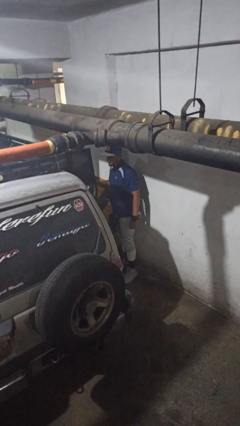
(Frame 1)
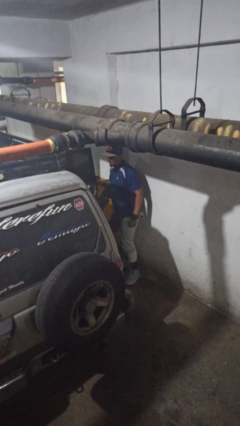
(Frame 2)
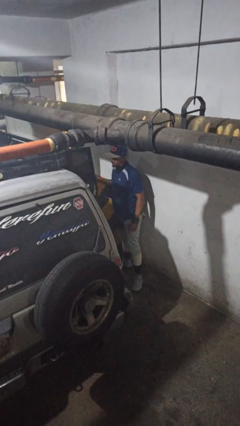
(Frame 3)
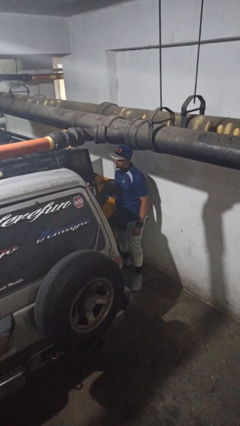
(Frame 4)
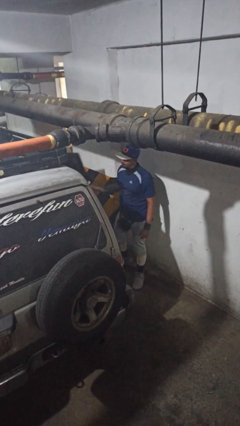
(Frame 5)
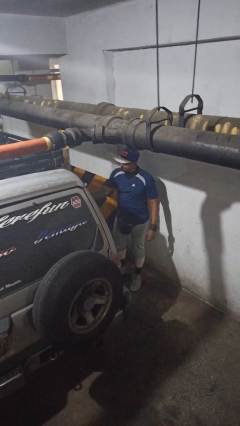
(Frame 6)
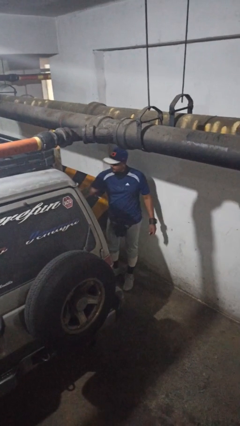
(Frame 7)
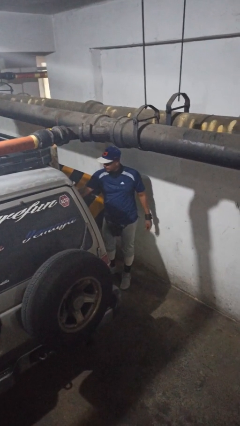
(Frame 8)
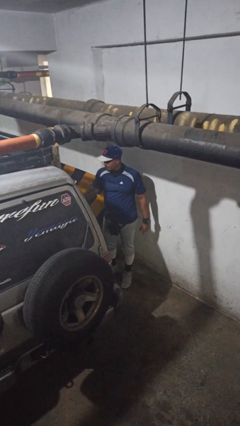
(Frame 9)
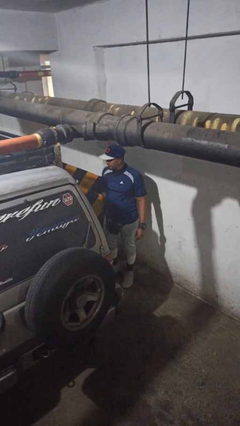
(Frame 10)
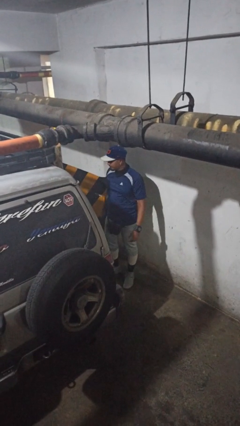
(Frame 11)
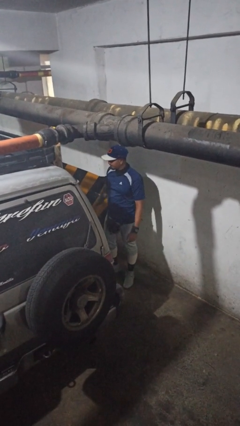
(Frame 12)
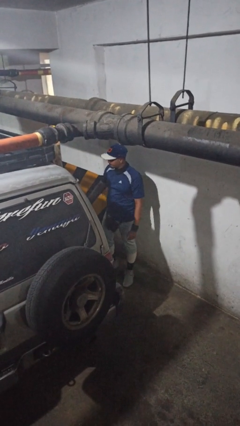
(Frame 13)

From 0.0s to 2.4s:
person closes car door

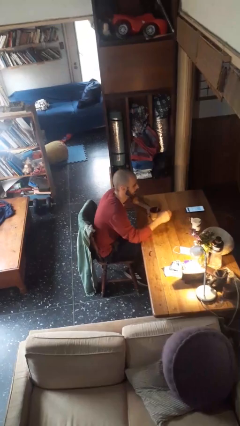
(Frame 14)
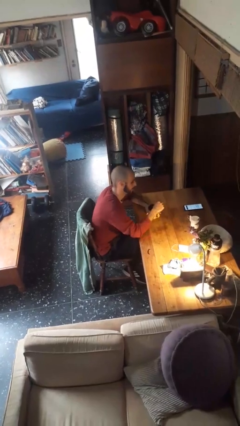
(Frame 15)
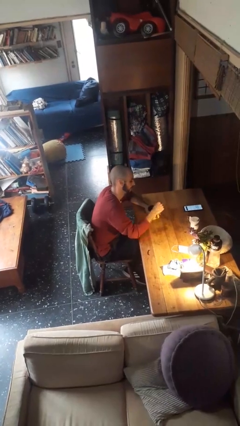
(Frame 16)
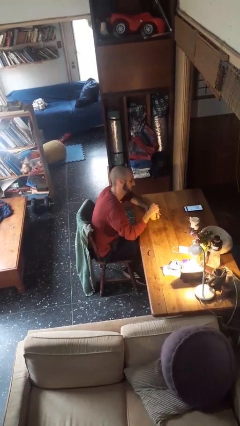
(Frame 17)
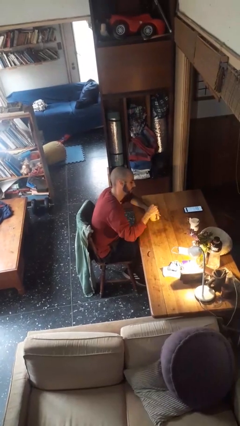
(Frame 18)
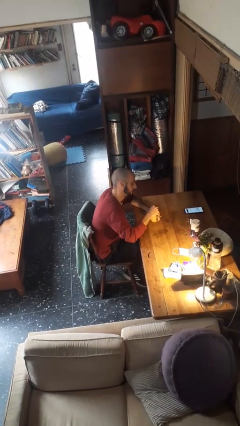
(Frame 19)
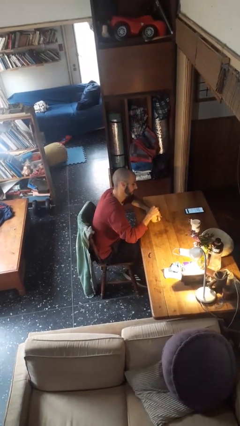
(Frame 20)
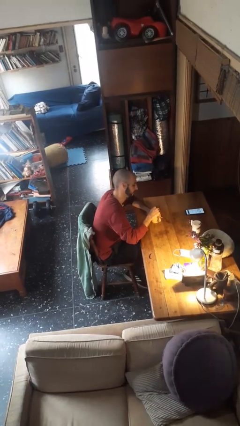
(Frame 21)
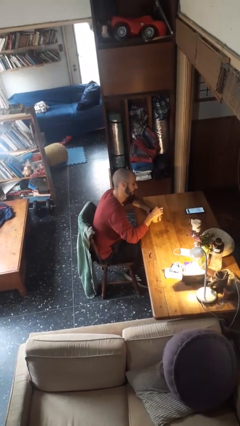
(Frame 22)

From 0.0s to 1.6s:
person stirs mug

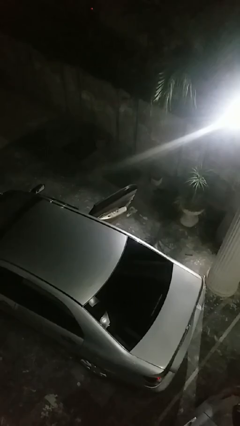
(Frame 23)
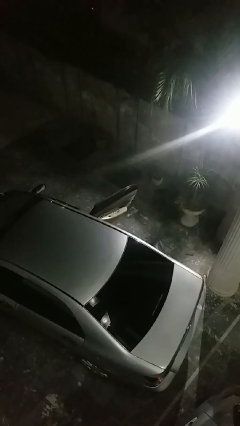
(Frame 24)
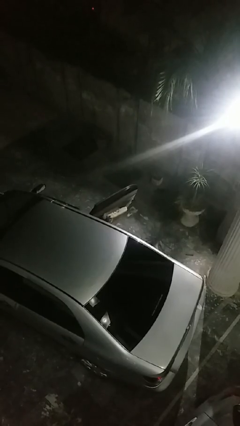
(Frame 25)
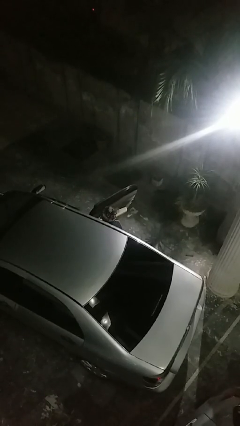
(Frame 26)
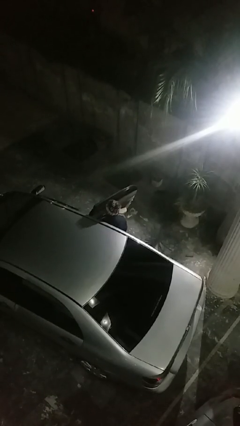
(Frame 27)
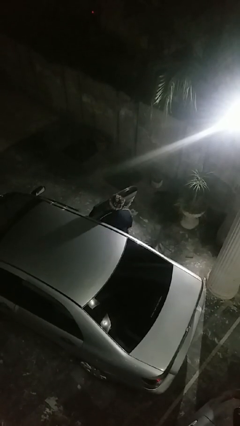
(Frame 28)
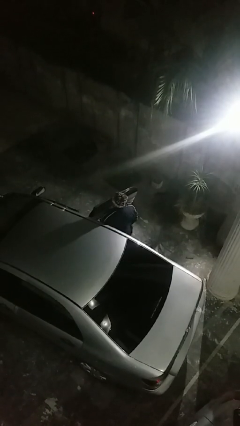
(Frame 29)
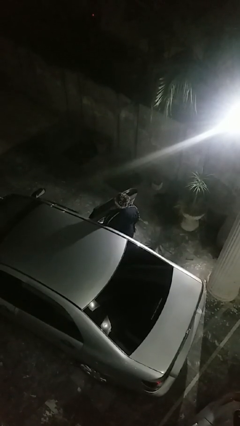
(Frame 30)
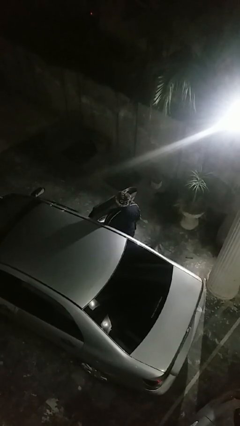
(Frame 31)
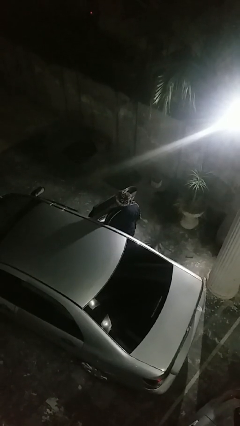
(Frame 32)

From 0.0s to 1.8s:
person exits car

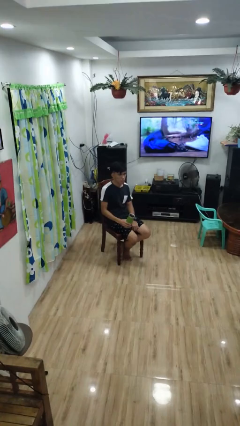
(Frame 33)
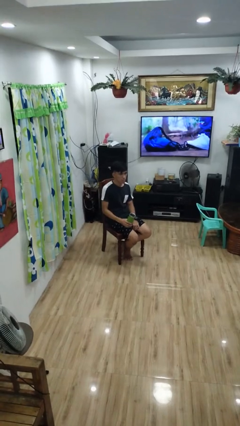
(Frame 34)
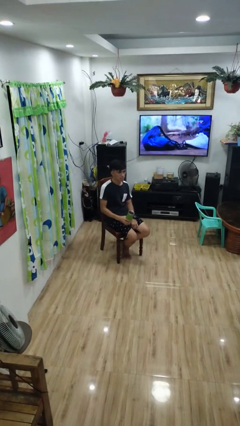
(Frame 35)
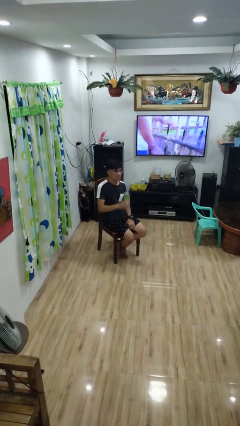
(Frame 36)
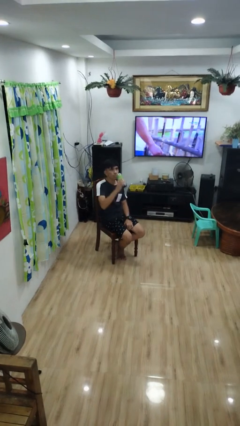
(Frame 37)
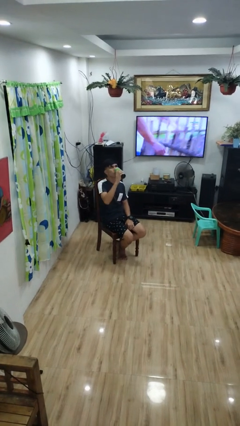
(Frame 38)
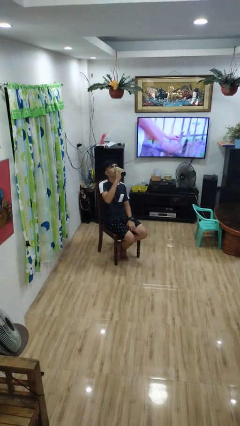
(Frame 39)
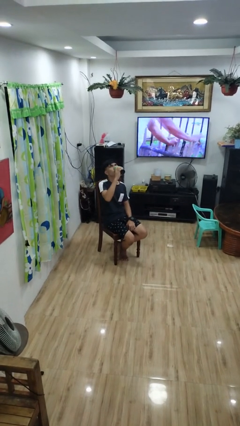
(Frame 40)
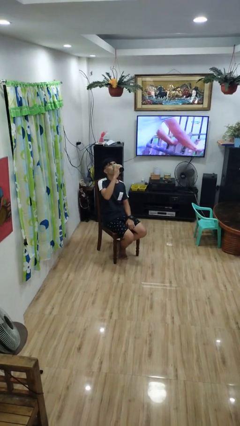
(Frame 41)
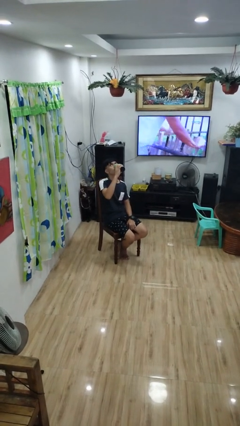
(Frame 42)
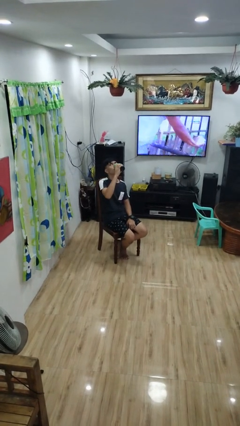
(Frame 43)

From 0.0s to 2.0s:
person drinks from bottle

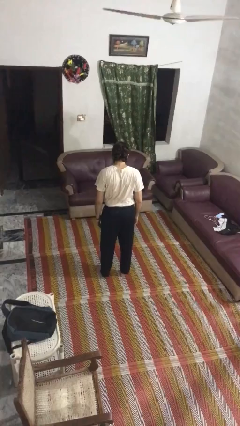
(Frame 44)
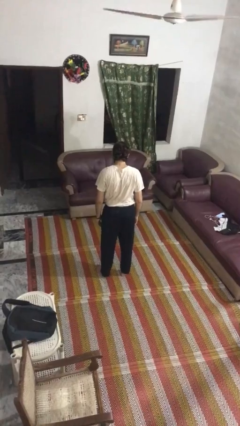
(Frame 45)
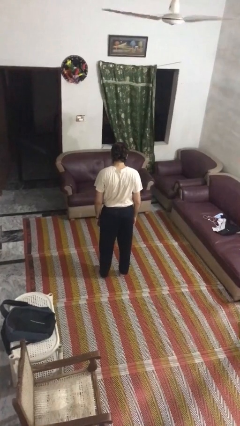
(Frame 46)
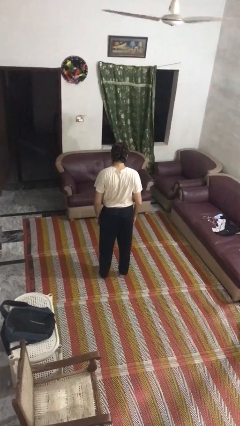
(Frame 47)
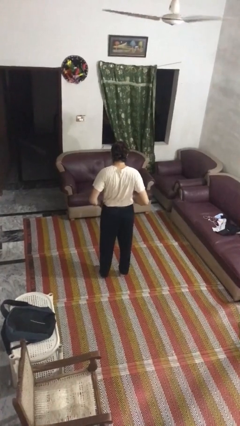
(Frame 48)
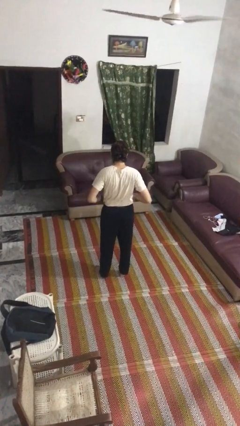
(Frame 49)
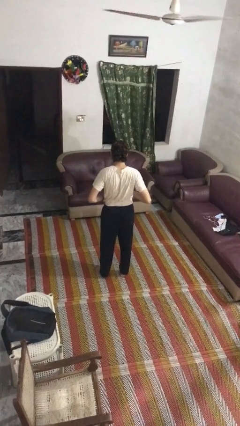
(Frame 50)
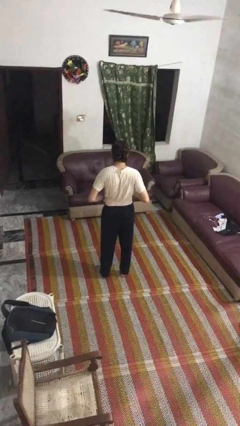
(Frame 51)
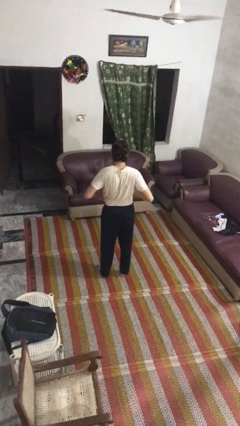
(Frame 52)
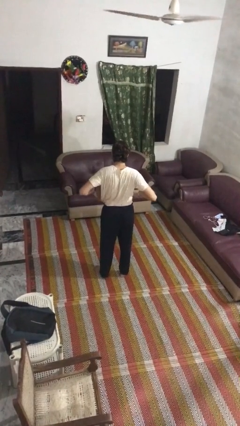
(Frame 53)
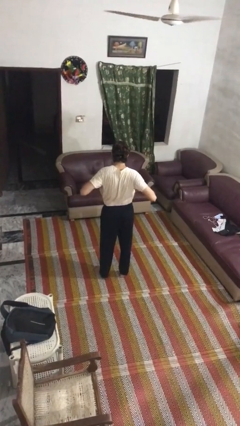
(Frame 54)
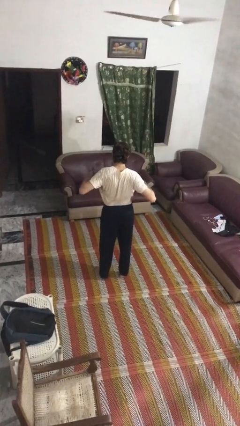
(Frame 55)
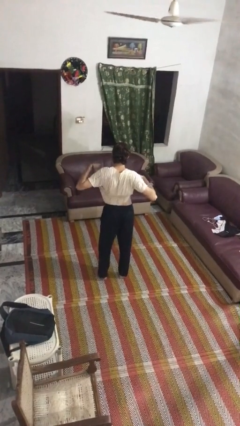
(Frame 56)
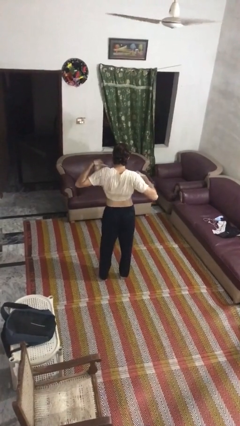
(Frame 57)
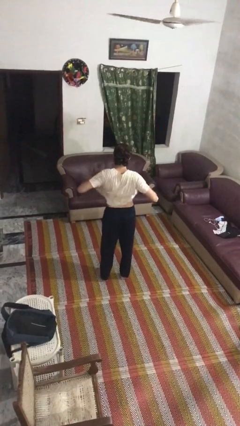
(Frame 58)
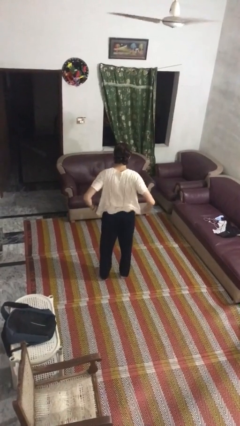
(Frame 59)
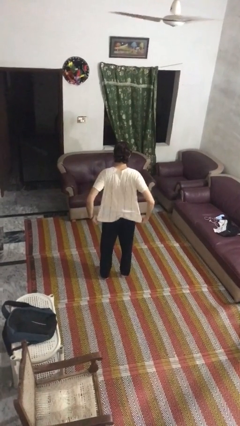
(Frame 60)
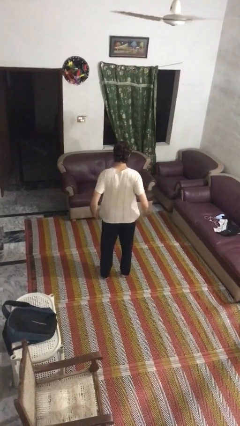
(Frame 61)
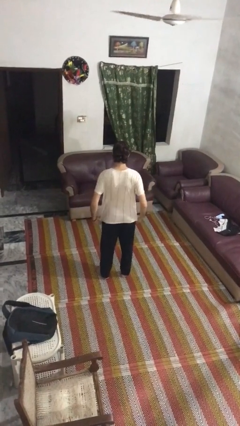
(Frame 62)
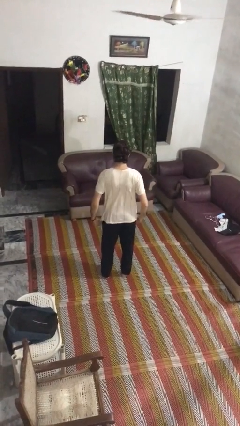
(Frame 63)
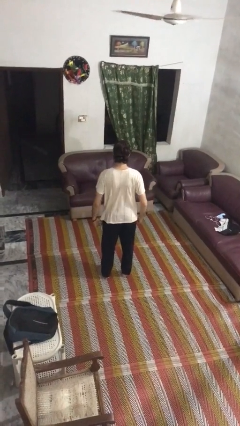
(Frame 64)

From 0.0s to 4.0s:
person untucks shirt

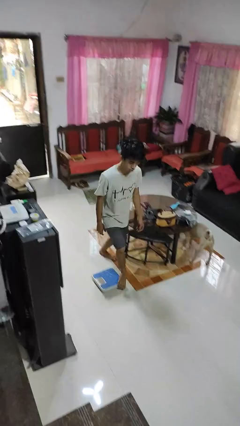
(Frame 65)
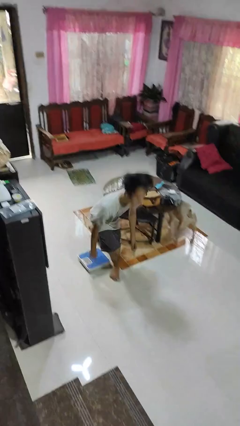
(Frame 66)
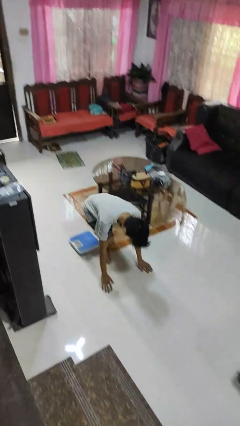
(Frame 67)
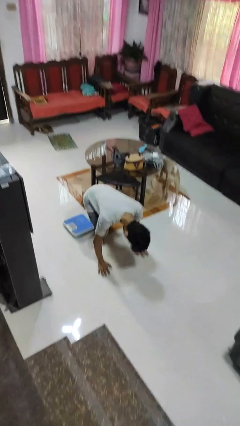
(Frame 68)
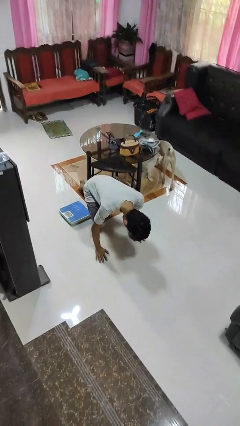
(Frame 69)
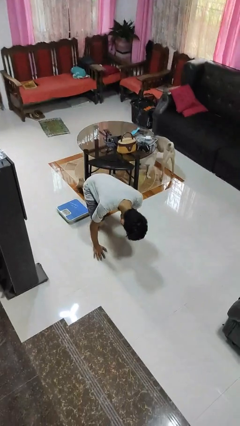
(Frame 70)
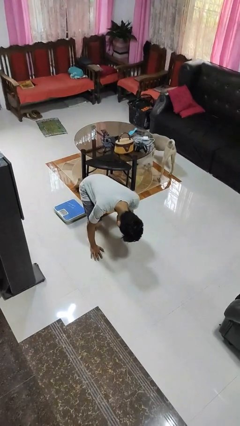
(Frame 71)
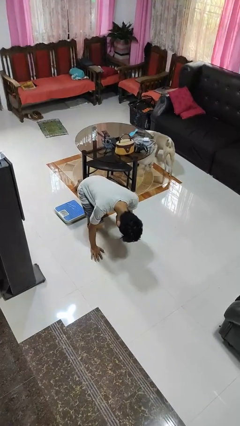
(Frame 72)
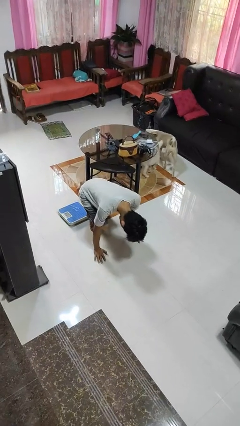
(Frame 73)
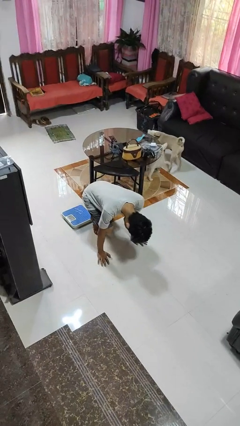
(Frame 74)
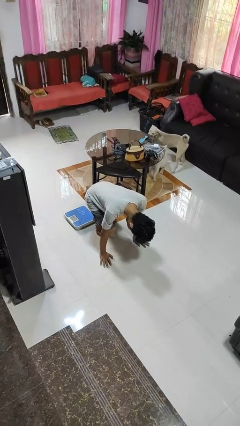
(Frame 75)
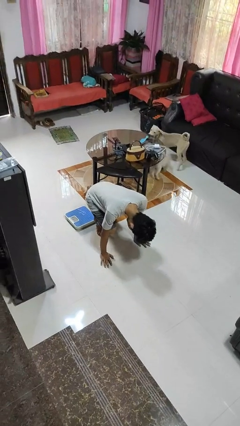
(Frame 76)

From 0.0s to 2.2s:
person trips on object on floor

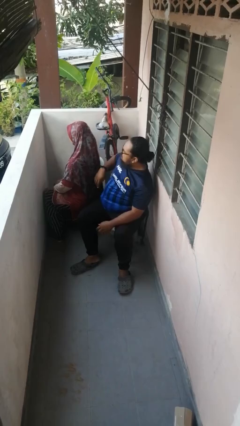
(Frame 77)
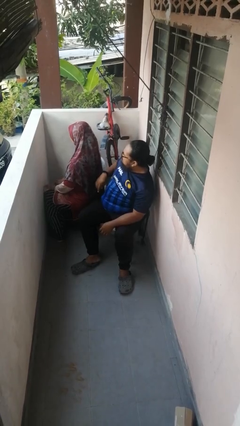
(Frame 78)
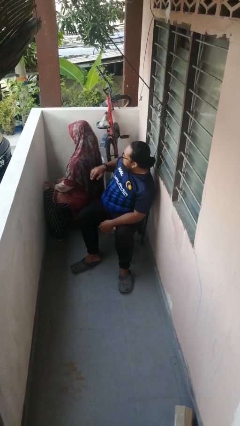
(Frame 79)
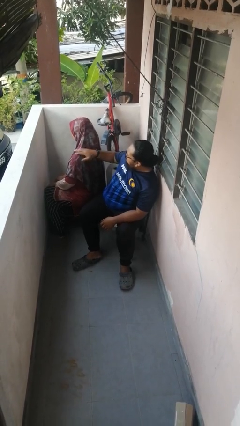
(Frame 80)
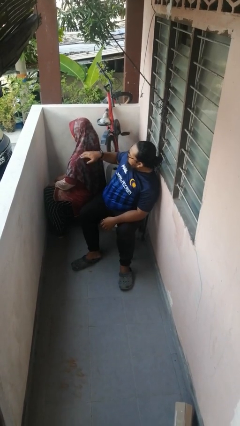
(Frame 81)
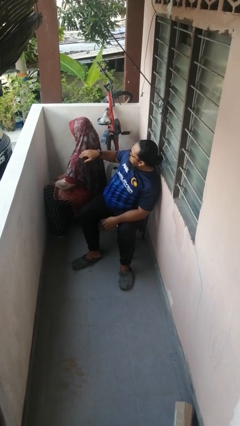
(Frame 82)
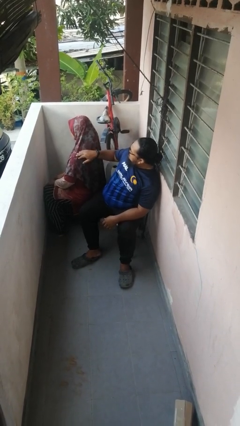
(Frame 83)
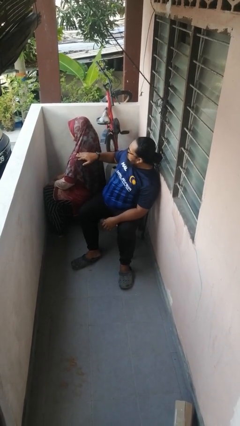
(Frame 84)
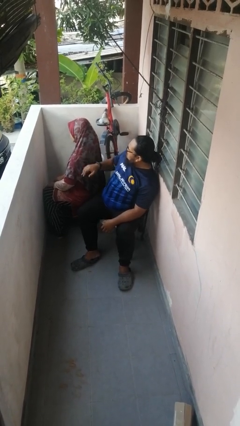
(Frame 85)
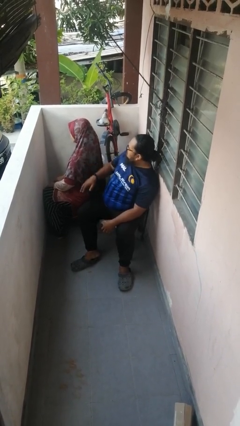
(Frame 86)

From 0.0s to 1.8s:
person touches back of person

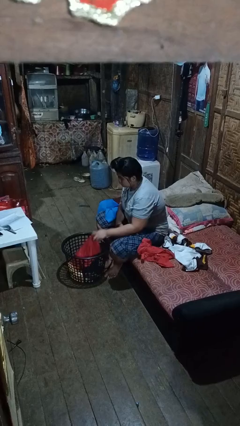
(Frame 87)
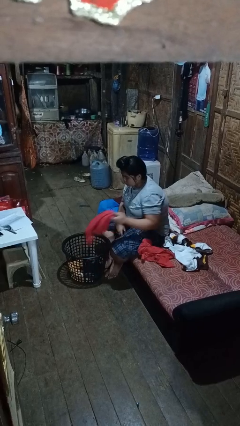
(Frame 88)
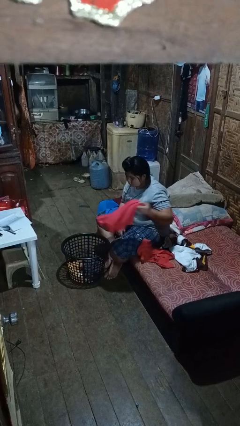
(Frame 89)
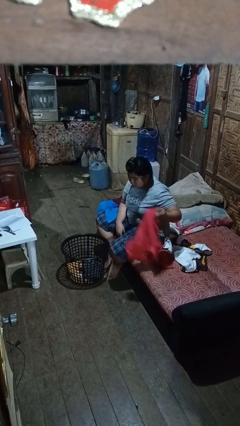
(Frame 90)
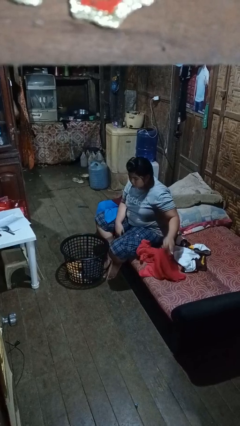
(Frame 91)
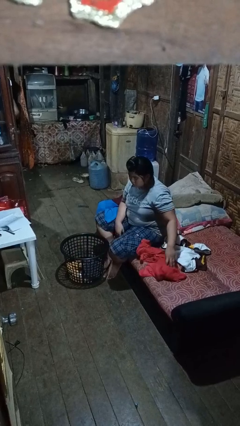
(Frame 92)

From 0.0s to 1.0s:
person takes object from basket
